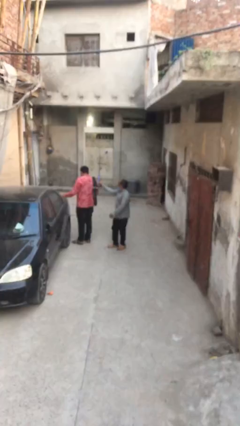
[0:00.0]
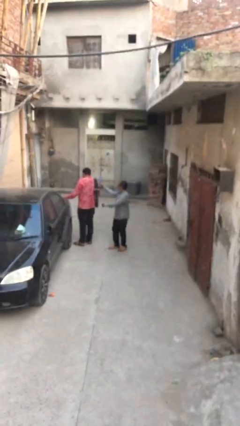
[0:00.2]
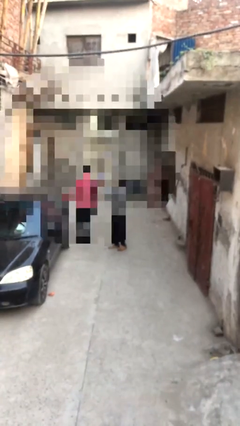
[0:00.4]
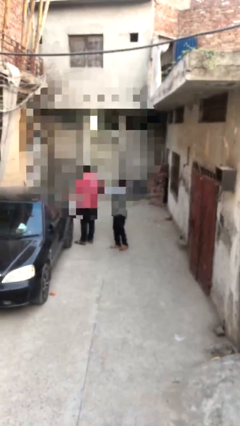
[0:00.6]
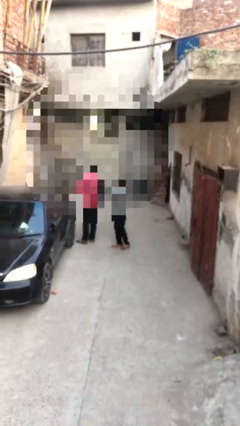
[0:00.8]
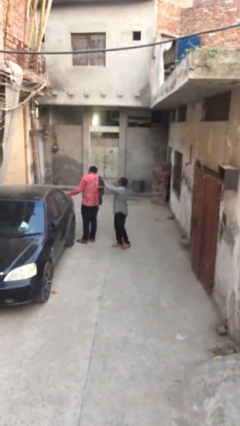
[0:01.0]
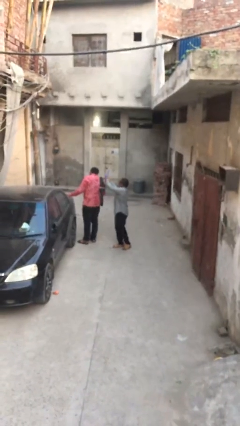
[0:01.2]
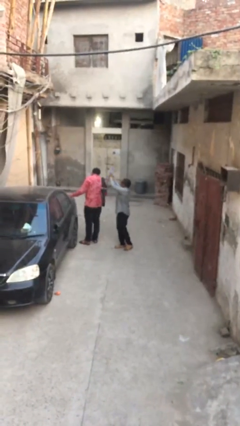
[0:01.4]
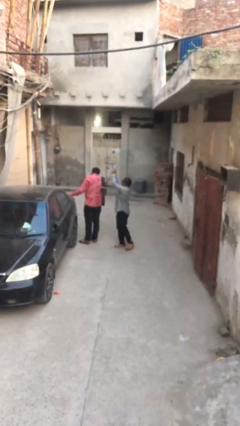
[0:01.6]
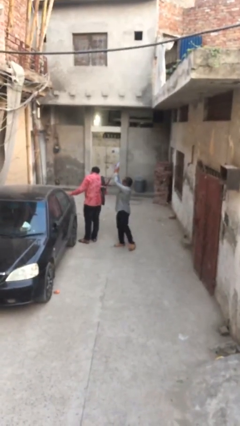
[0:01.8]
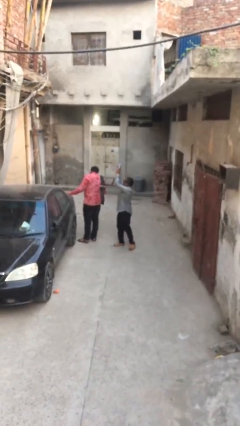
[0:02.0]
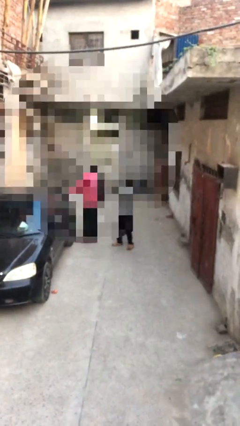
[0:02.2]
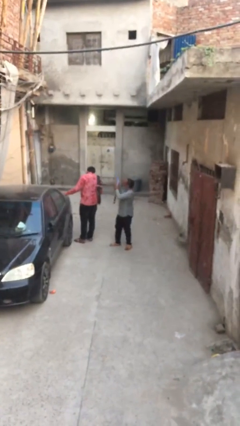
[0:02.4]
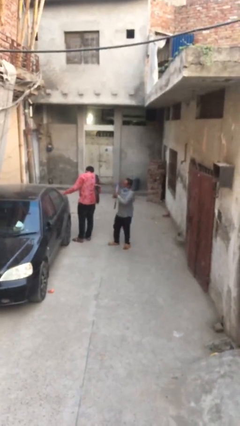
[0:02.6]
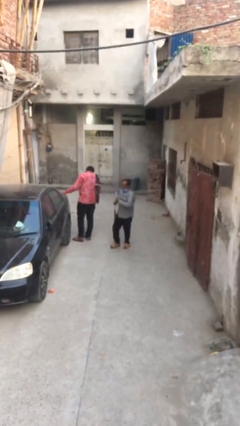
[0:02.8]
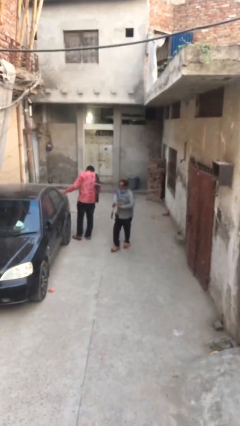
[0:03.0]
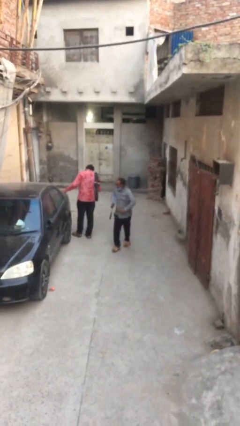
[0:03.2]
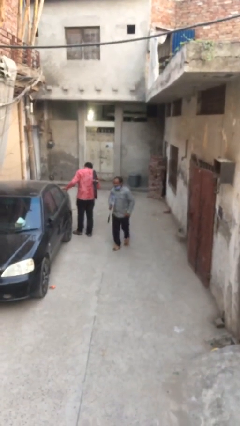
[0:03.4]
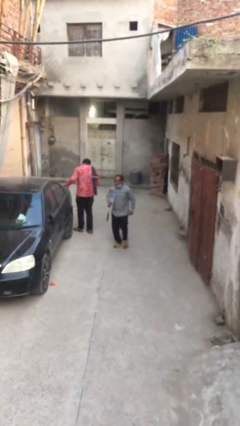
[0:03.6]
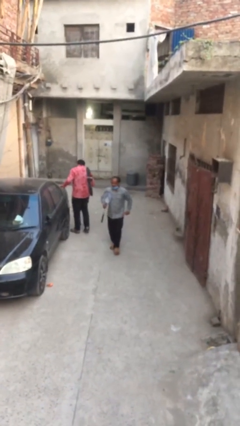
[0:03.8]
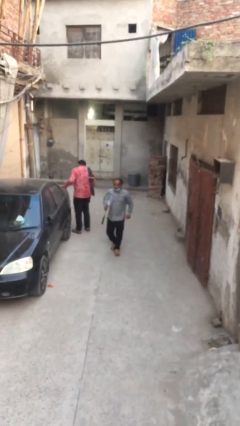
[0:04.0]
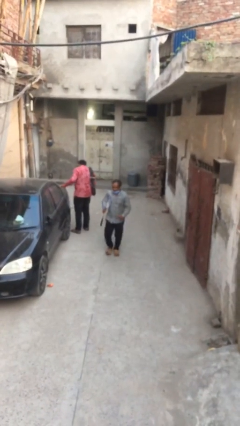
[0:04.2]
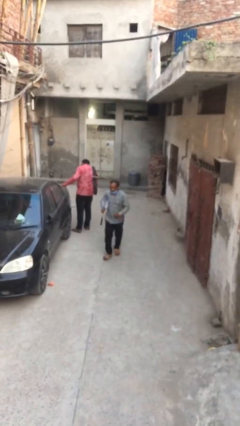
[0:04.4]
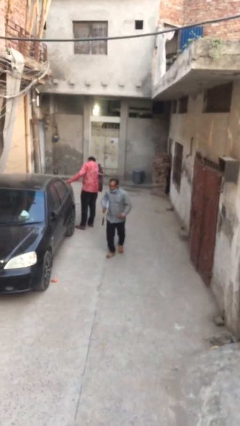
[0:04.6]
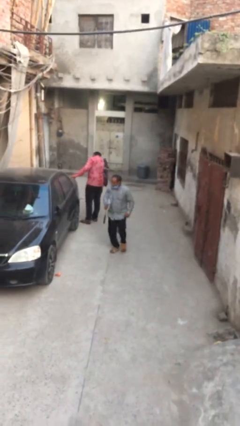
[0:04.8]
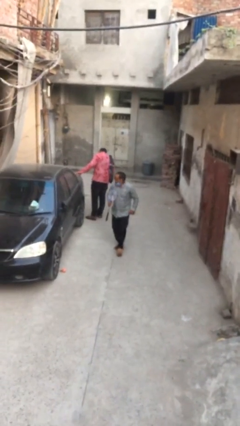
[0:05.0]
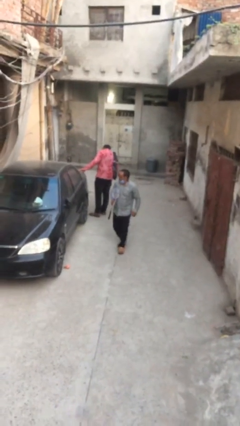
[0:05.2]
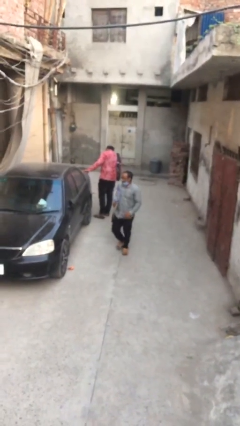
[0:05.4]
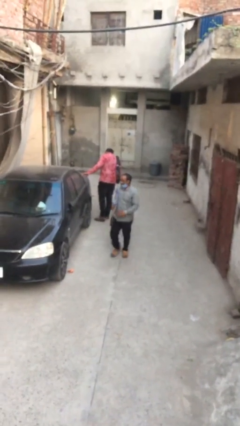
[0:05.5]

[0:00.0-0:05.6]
person steals object from person

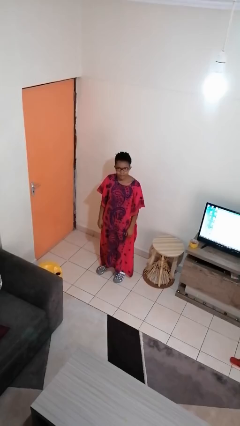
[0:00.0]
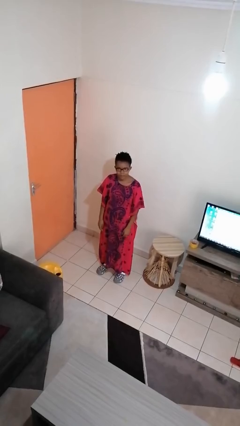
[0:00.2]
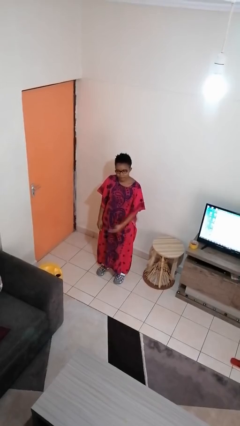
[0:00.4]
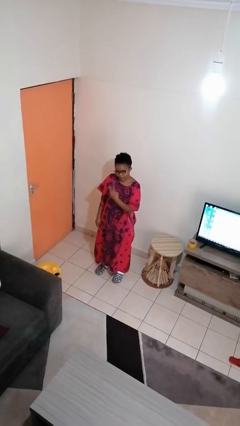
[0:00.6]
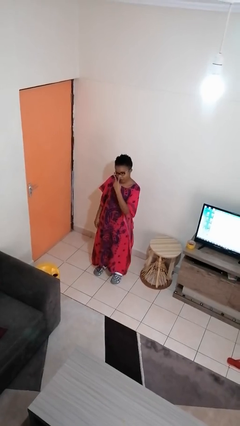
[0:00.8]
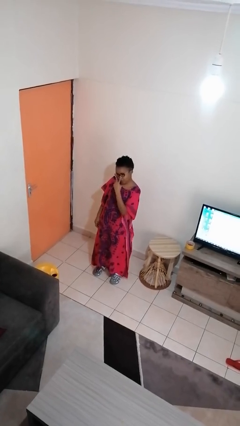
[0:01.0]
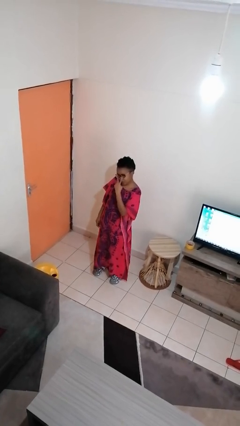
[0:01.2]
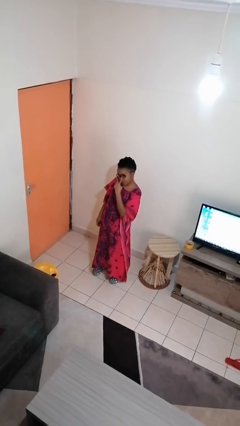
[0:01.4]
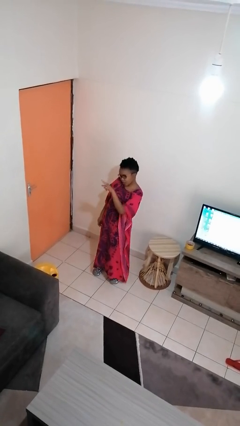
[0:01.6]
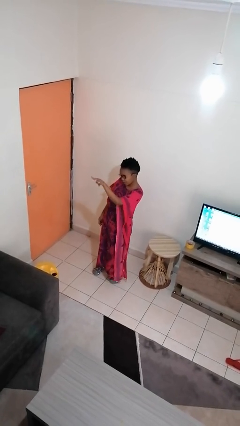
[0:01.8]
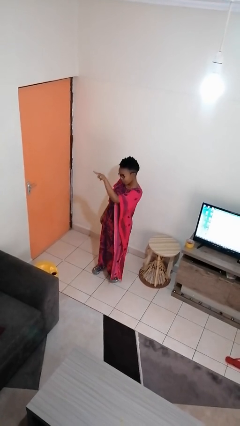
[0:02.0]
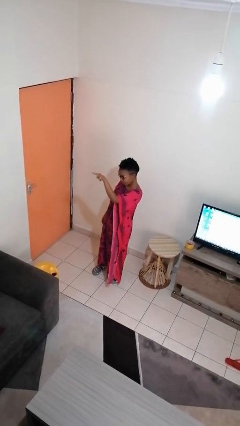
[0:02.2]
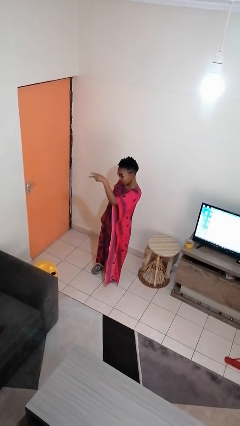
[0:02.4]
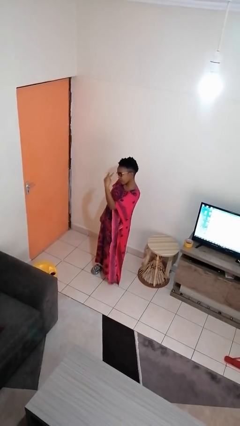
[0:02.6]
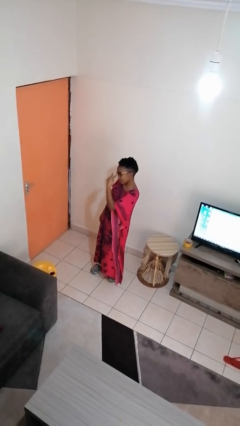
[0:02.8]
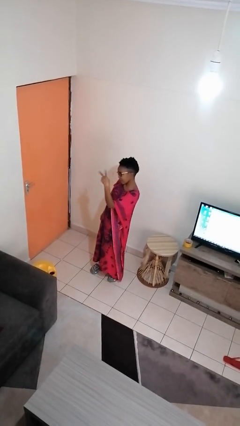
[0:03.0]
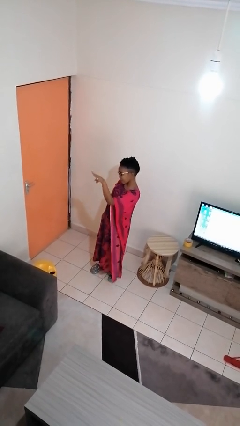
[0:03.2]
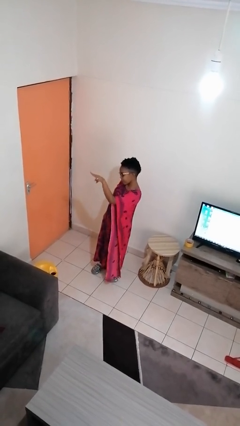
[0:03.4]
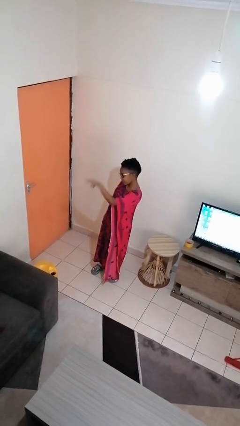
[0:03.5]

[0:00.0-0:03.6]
person gestures watch closely

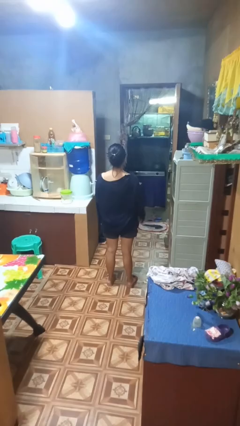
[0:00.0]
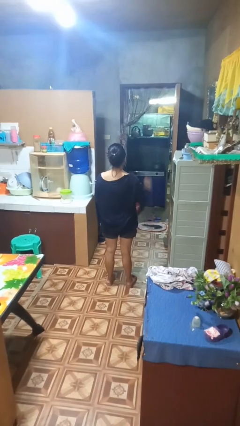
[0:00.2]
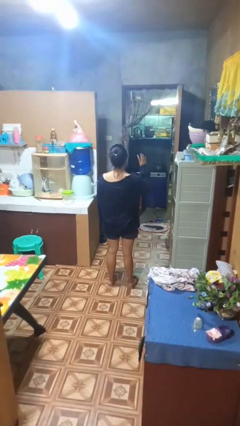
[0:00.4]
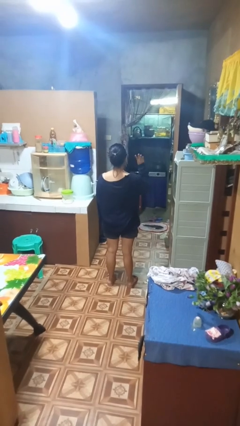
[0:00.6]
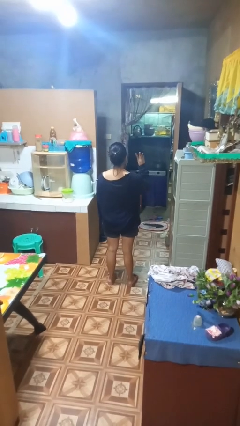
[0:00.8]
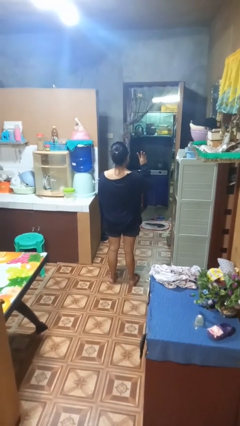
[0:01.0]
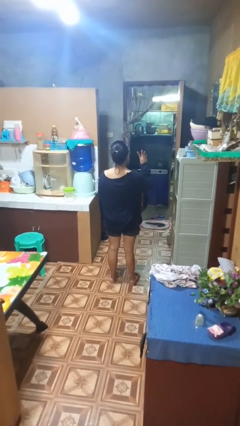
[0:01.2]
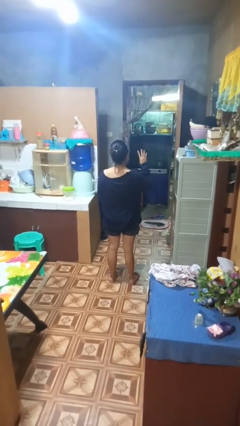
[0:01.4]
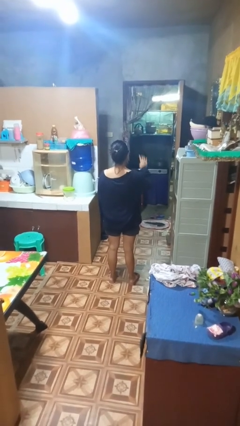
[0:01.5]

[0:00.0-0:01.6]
person gestures number four

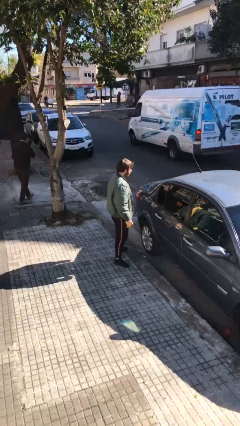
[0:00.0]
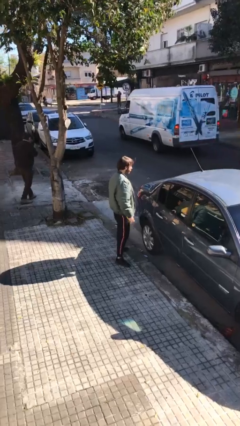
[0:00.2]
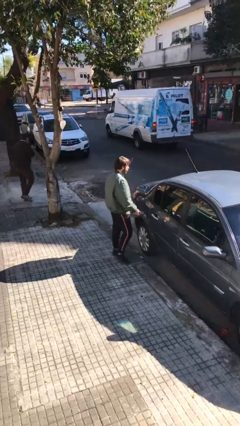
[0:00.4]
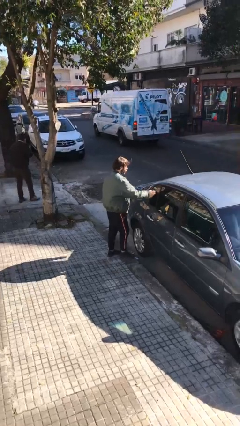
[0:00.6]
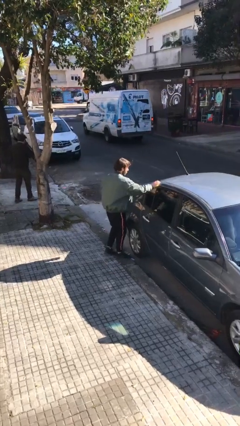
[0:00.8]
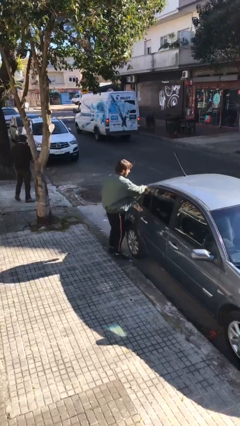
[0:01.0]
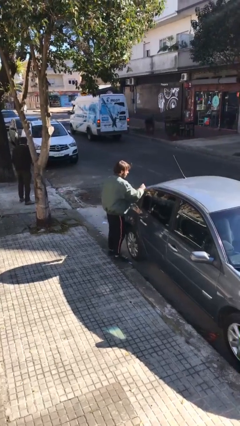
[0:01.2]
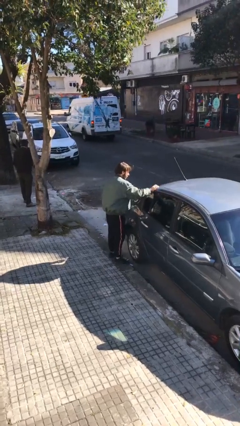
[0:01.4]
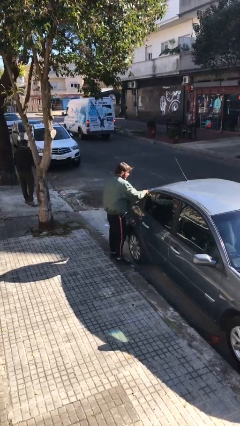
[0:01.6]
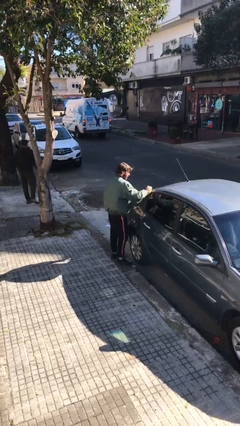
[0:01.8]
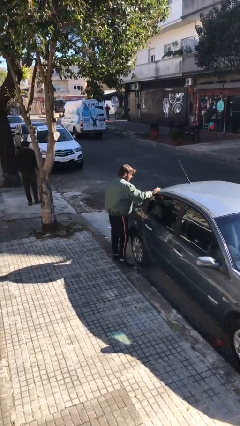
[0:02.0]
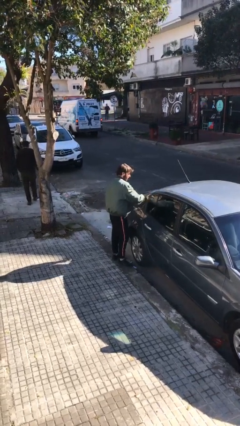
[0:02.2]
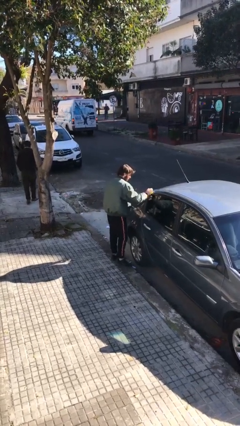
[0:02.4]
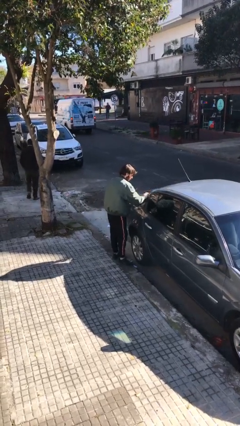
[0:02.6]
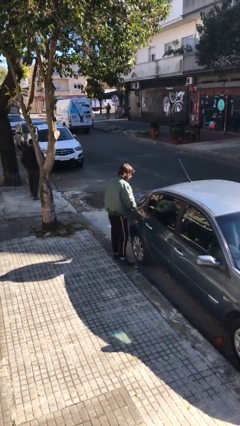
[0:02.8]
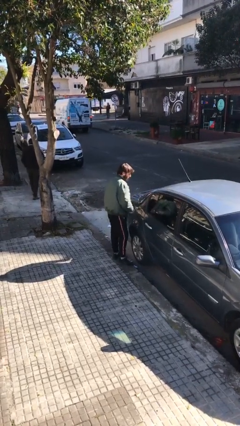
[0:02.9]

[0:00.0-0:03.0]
person polishes car with rag

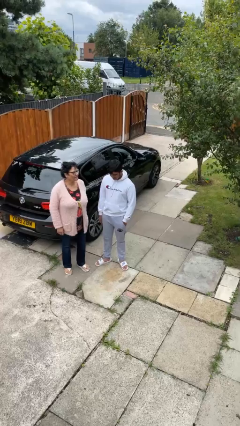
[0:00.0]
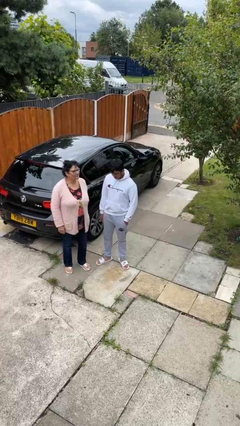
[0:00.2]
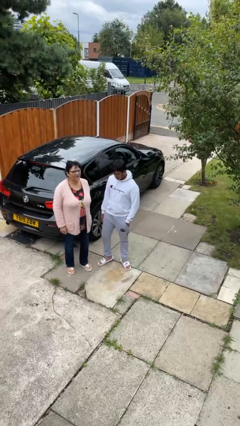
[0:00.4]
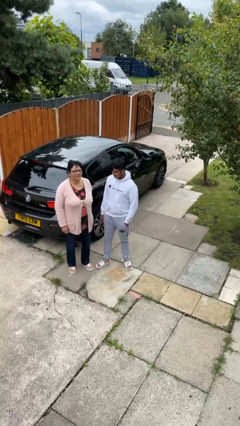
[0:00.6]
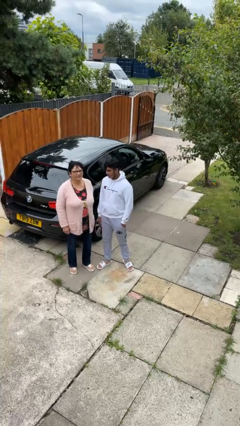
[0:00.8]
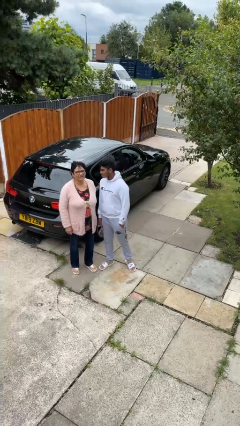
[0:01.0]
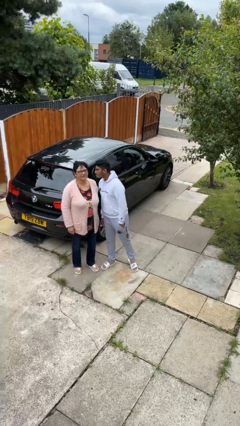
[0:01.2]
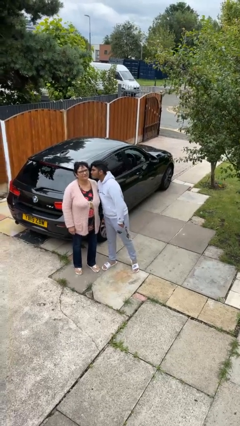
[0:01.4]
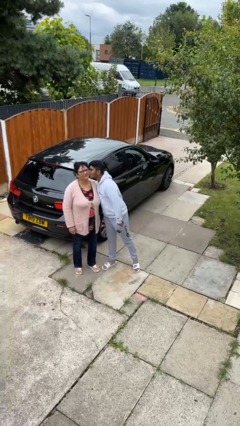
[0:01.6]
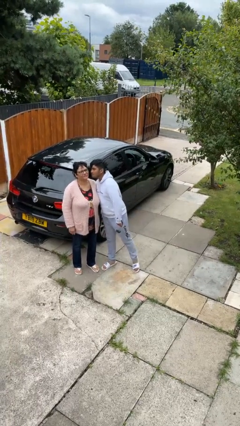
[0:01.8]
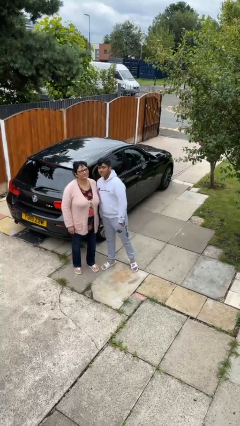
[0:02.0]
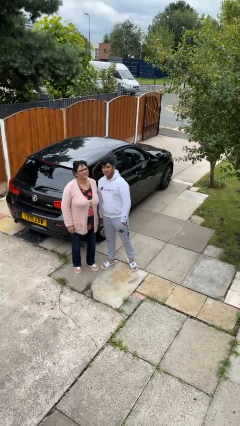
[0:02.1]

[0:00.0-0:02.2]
person kisses cheek of person

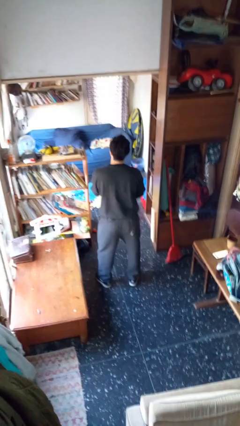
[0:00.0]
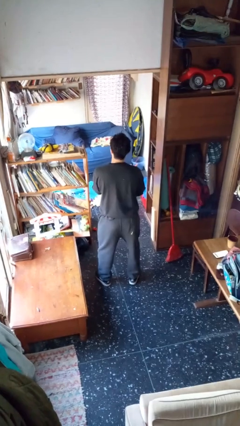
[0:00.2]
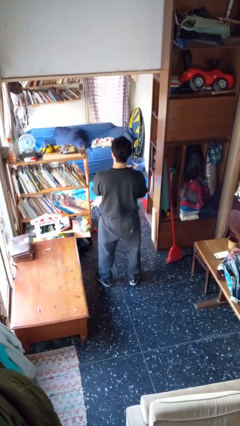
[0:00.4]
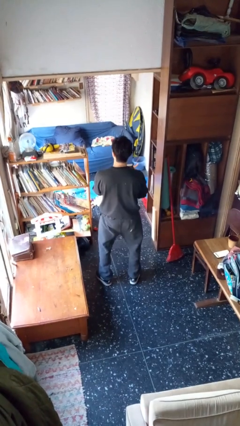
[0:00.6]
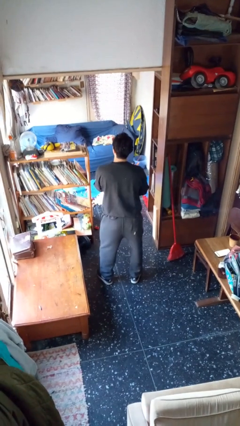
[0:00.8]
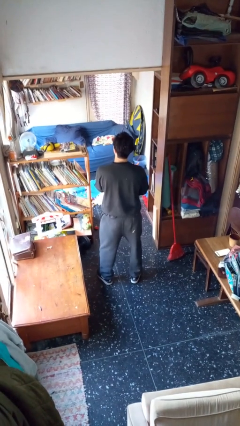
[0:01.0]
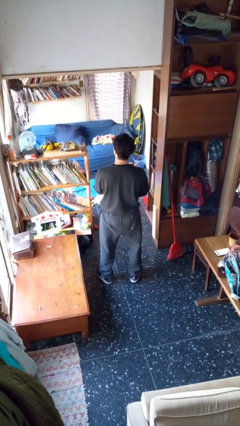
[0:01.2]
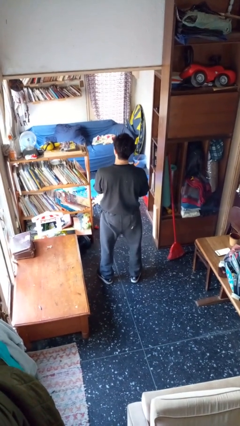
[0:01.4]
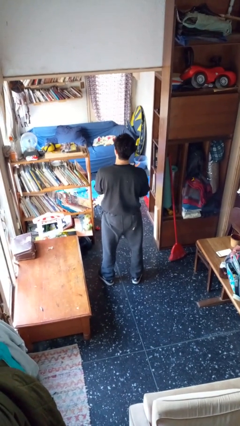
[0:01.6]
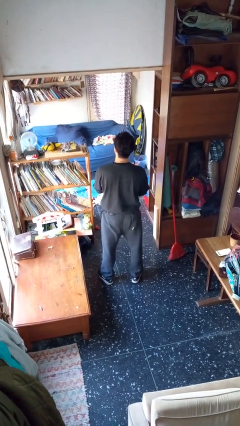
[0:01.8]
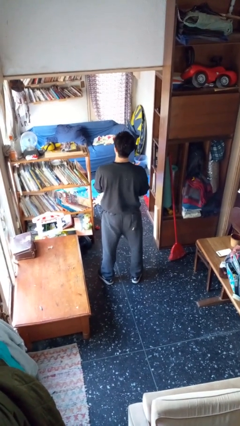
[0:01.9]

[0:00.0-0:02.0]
person wiggles hips
